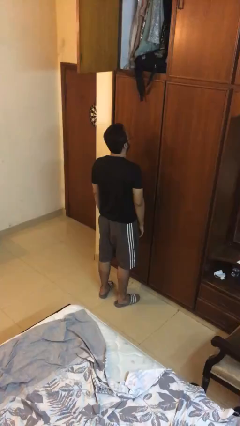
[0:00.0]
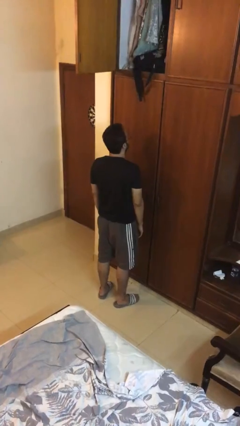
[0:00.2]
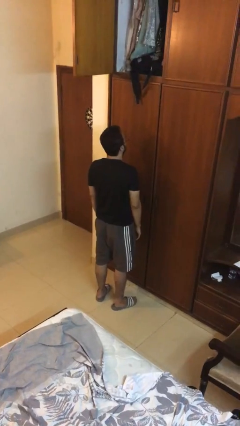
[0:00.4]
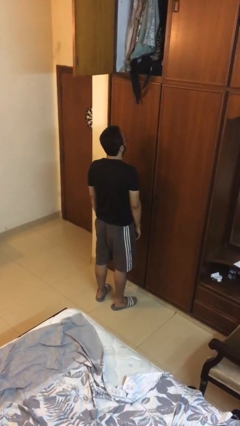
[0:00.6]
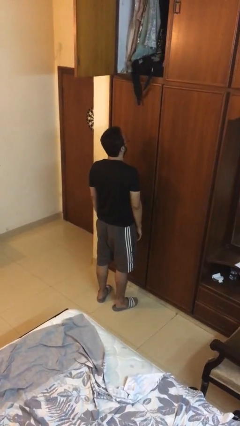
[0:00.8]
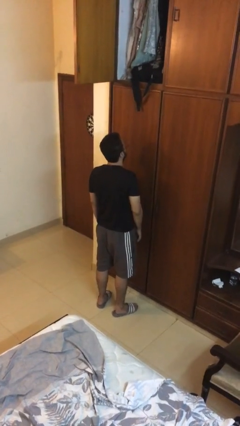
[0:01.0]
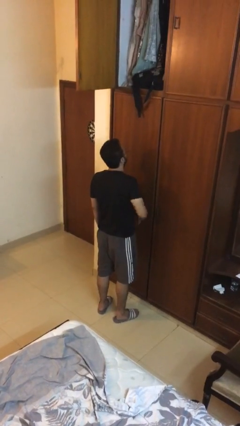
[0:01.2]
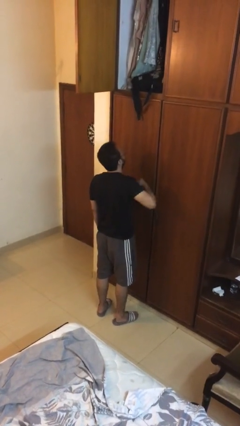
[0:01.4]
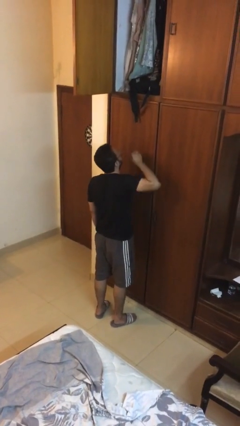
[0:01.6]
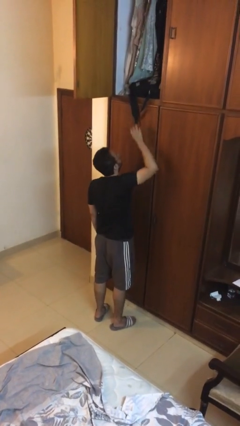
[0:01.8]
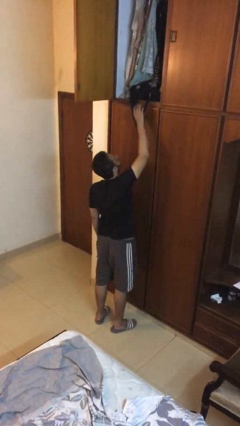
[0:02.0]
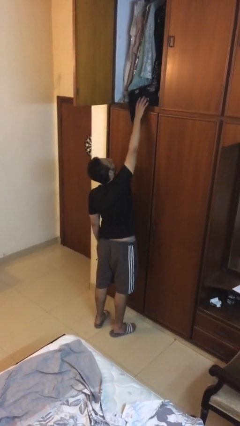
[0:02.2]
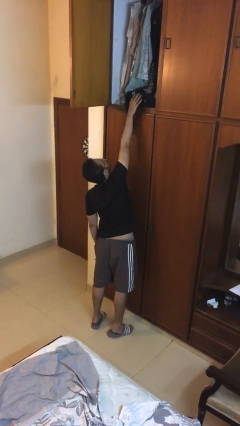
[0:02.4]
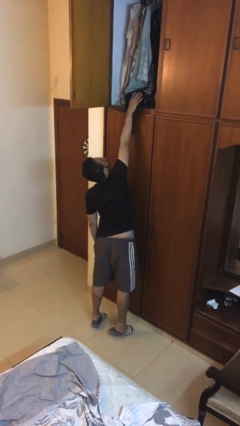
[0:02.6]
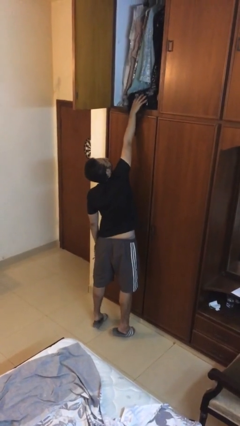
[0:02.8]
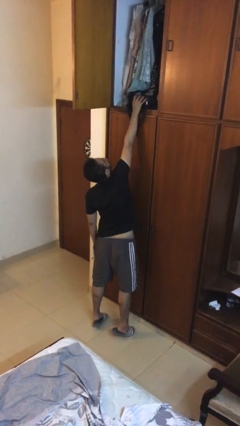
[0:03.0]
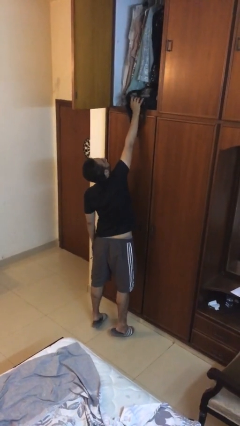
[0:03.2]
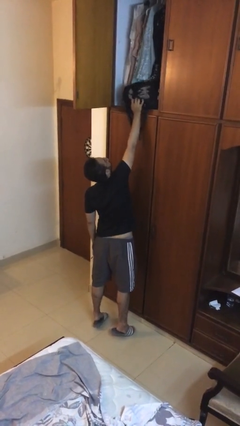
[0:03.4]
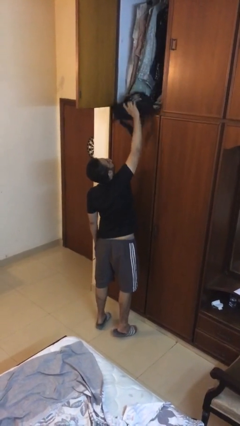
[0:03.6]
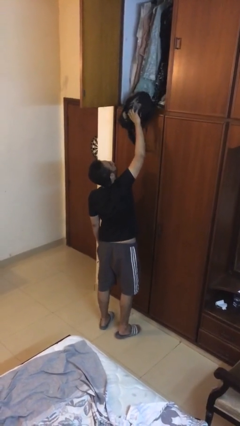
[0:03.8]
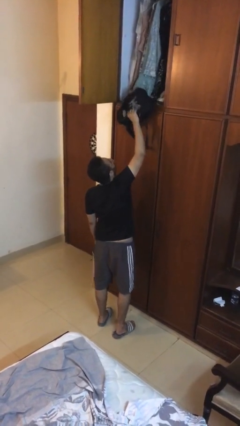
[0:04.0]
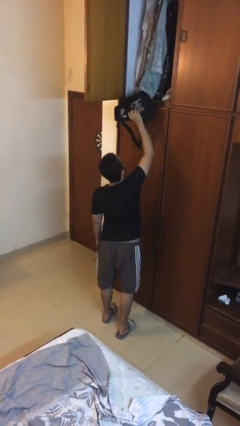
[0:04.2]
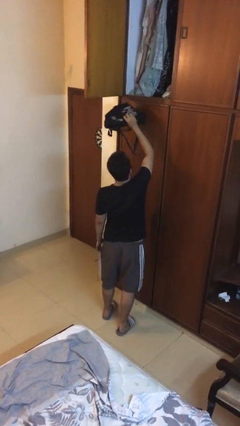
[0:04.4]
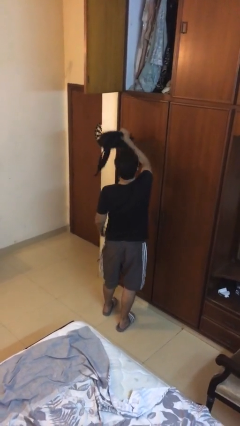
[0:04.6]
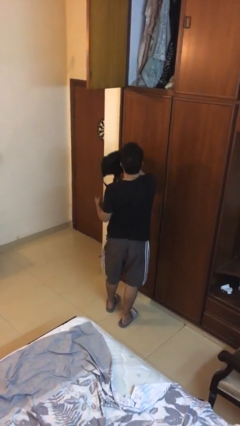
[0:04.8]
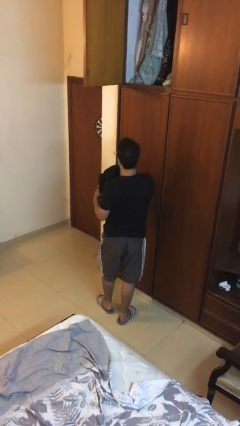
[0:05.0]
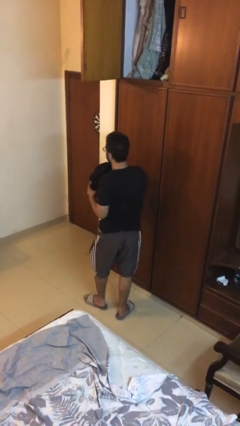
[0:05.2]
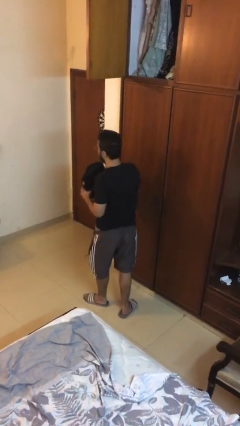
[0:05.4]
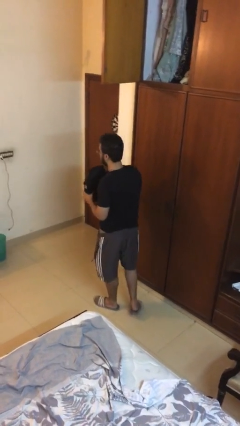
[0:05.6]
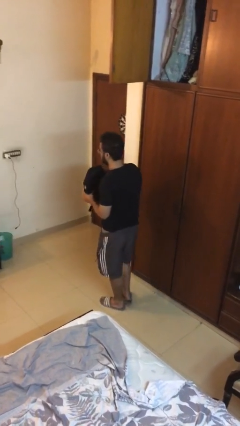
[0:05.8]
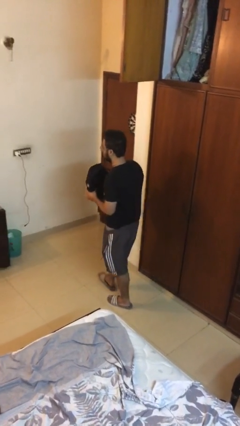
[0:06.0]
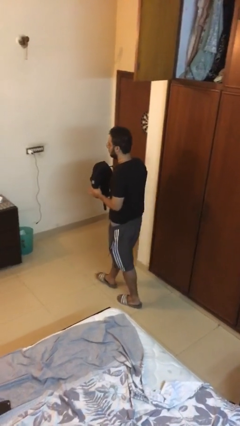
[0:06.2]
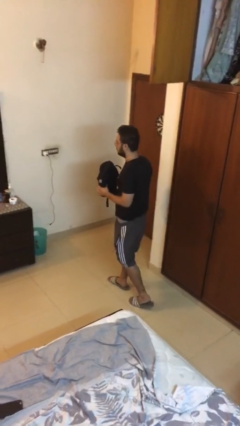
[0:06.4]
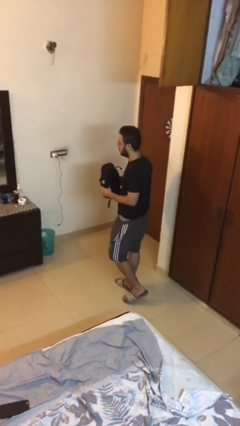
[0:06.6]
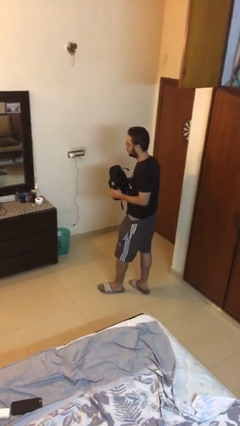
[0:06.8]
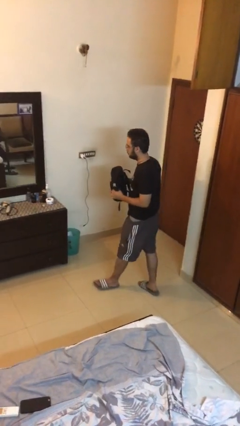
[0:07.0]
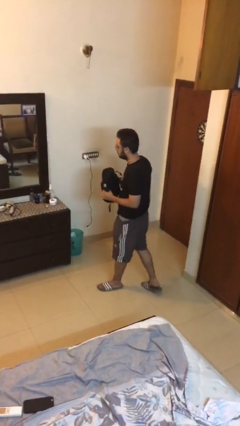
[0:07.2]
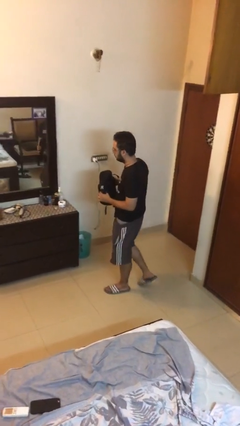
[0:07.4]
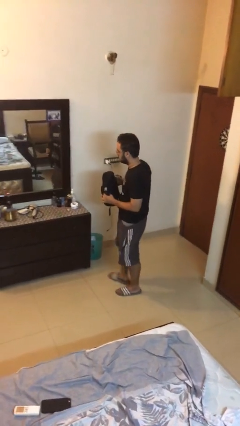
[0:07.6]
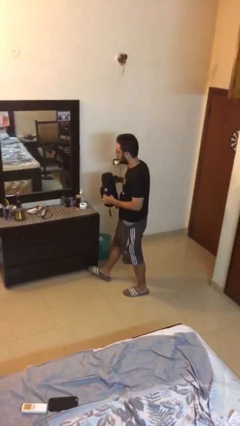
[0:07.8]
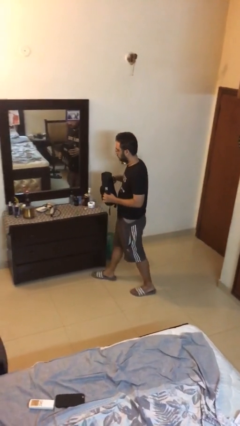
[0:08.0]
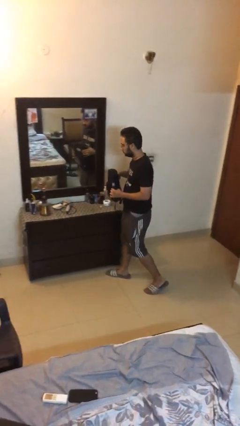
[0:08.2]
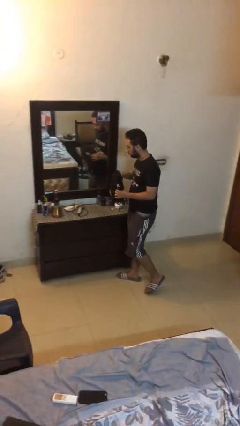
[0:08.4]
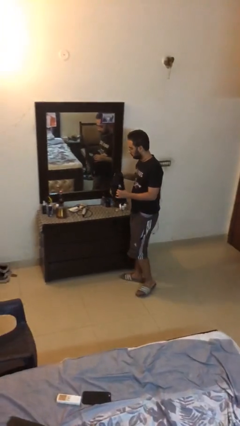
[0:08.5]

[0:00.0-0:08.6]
person picks up object from shelf

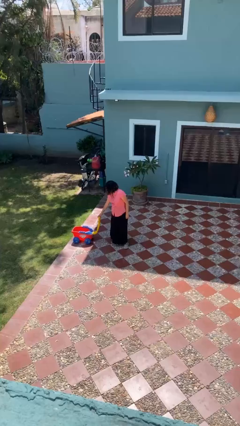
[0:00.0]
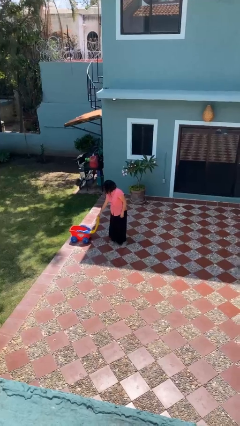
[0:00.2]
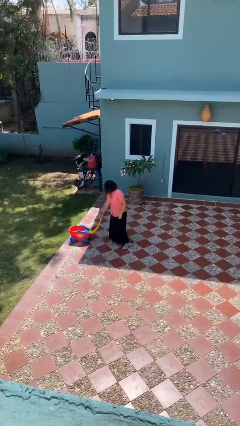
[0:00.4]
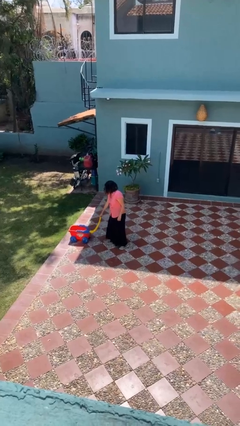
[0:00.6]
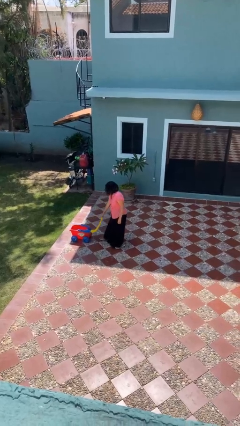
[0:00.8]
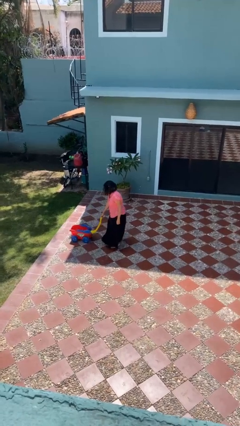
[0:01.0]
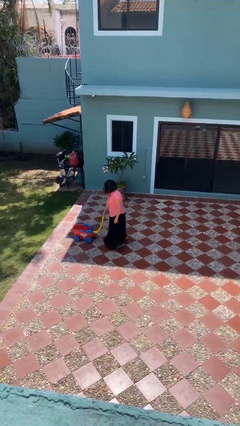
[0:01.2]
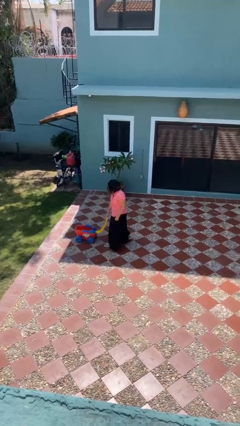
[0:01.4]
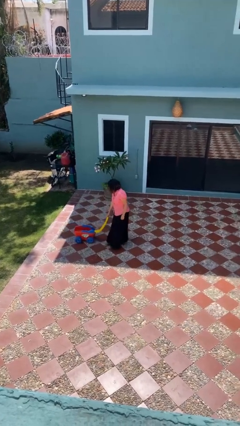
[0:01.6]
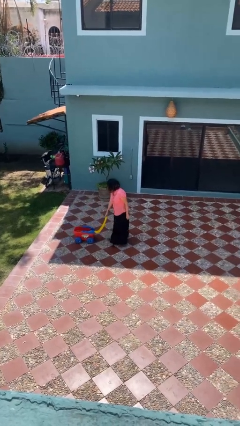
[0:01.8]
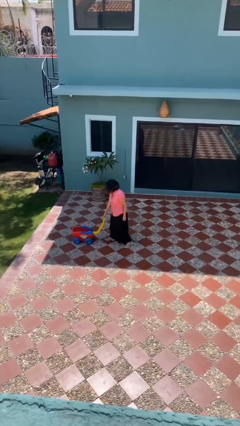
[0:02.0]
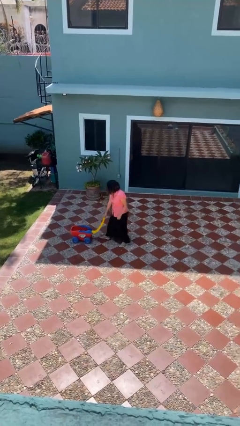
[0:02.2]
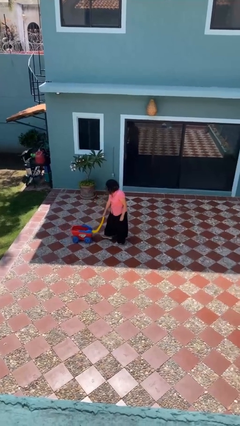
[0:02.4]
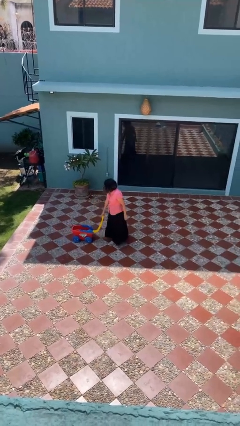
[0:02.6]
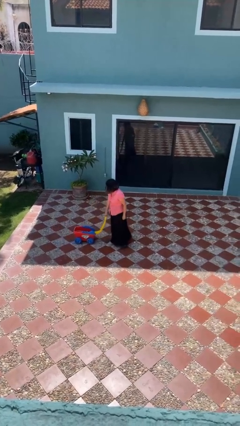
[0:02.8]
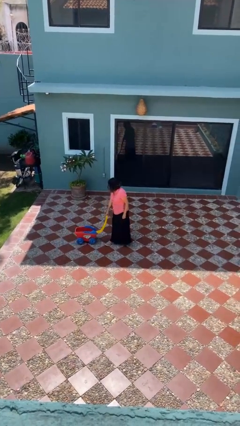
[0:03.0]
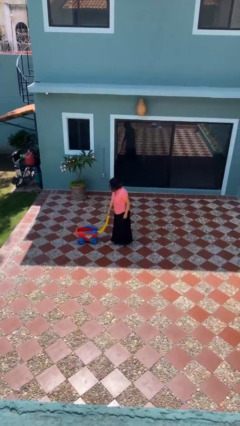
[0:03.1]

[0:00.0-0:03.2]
person pulls wheeled cart

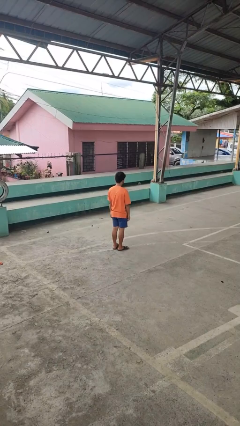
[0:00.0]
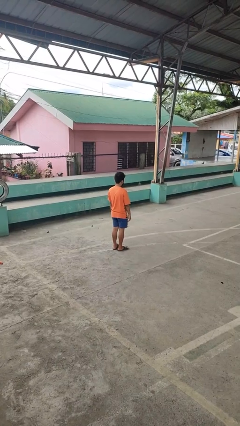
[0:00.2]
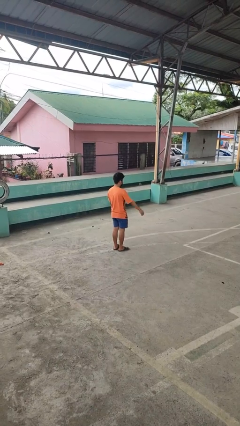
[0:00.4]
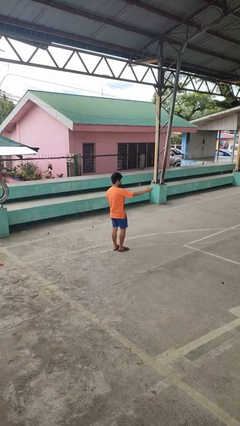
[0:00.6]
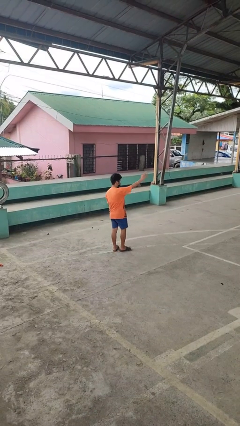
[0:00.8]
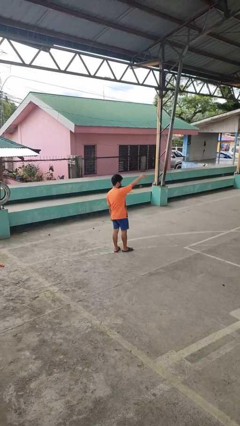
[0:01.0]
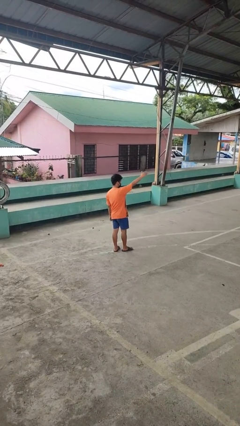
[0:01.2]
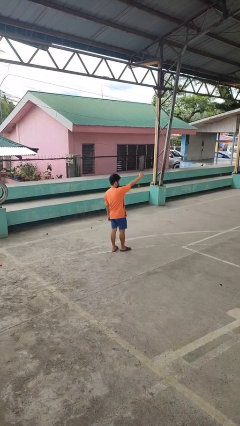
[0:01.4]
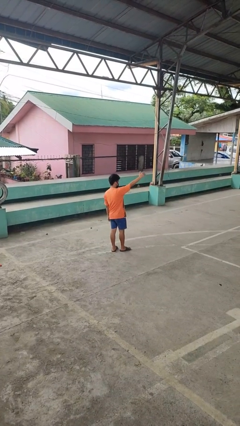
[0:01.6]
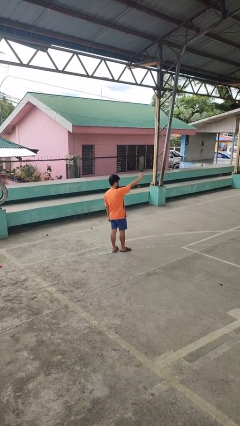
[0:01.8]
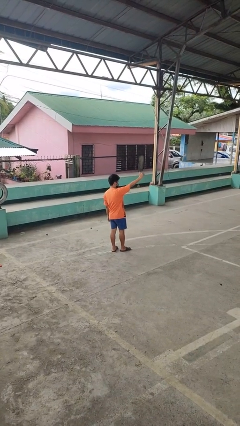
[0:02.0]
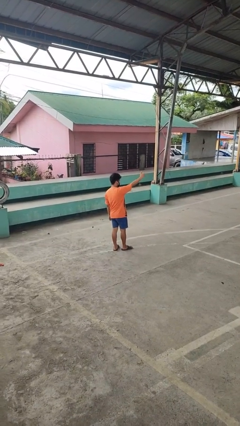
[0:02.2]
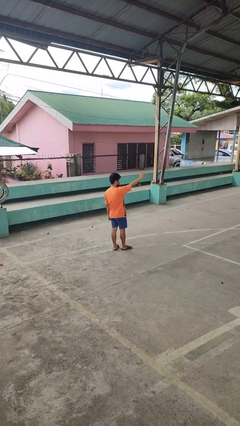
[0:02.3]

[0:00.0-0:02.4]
person gestures come here

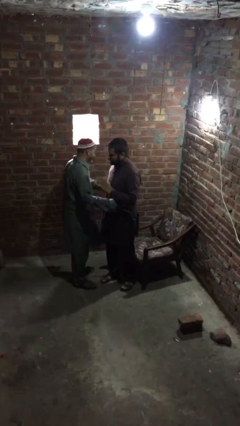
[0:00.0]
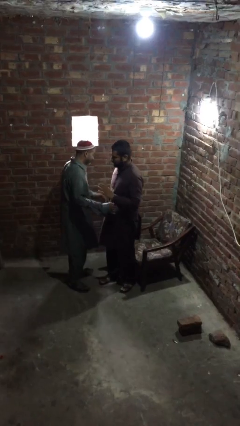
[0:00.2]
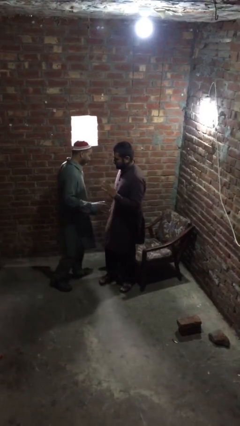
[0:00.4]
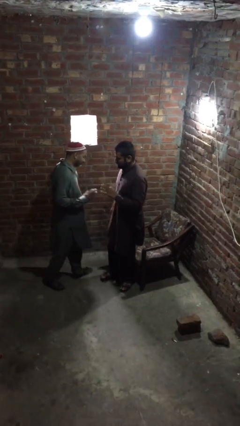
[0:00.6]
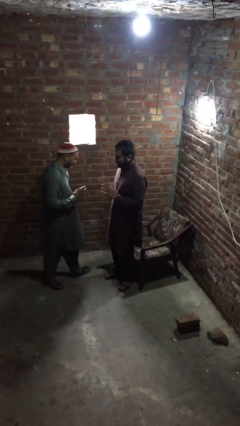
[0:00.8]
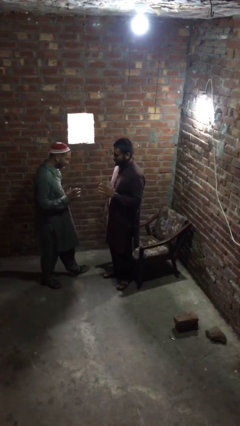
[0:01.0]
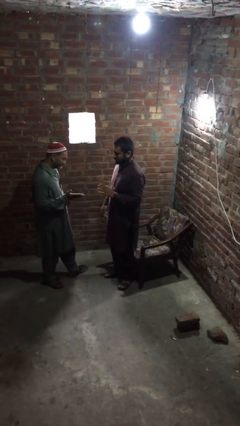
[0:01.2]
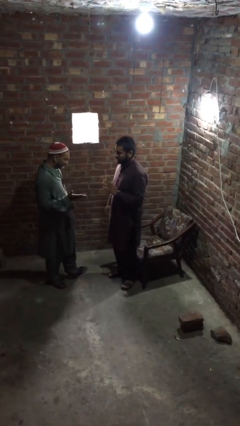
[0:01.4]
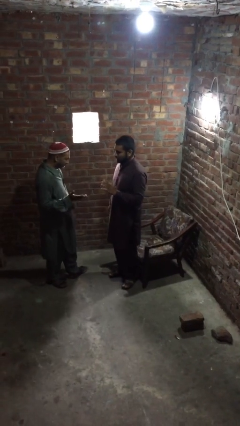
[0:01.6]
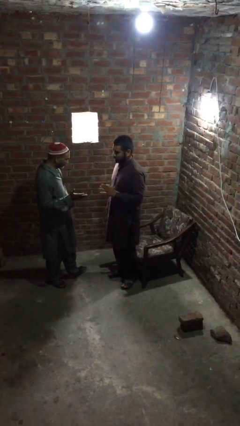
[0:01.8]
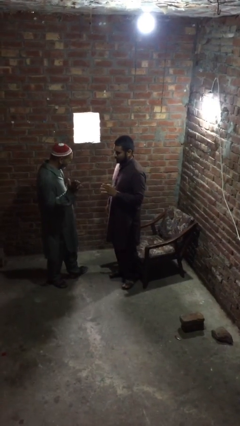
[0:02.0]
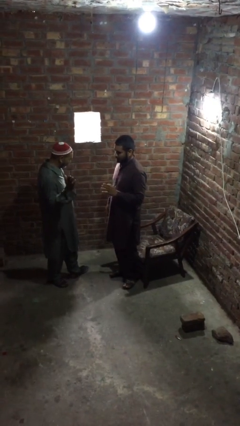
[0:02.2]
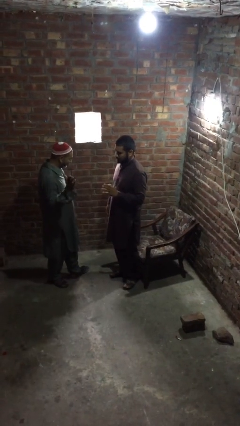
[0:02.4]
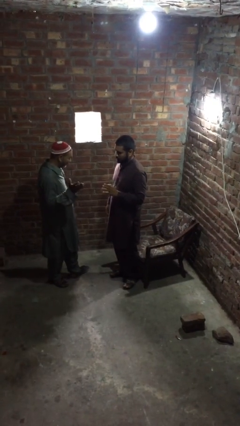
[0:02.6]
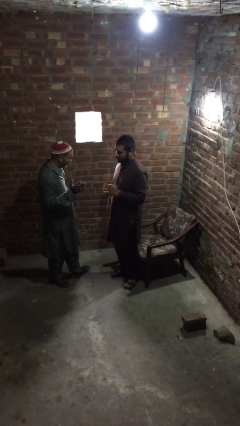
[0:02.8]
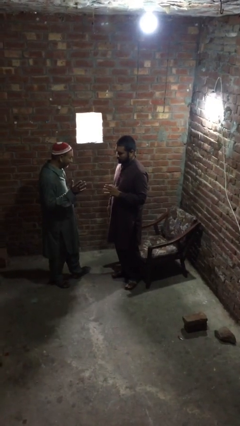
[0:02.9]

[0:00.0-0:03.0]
person talks to person

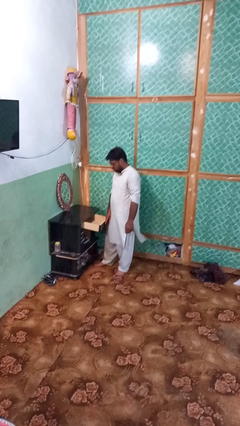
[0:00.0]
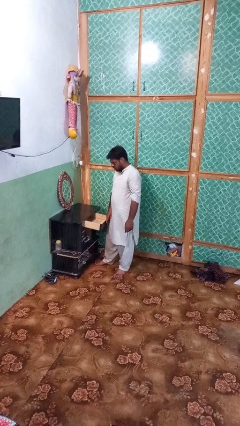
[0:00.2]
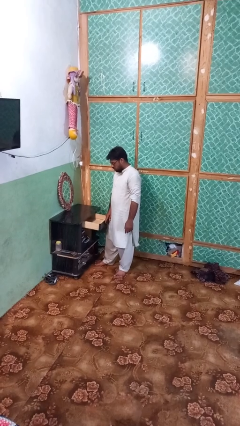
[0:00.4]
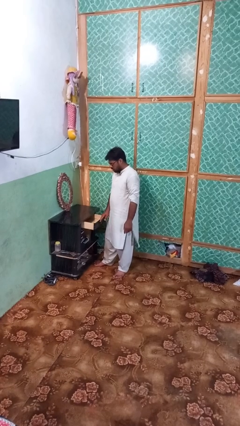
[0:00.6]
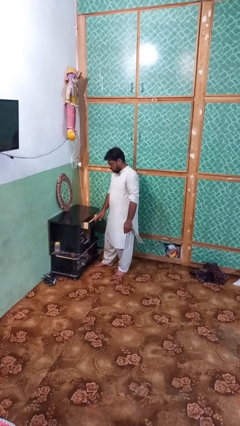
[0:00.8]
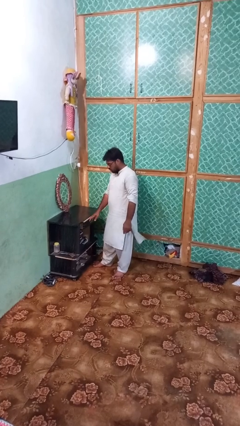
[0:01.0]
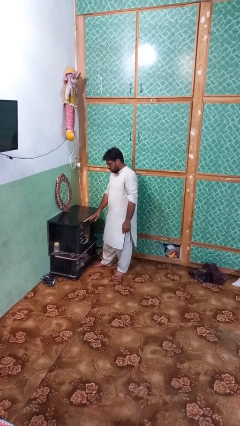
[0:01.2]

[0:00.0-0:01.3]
person closes dresser drawer
